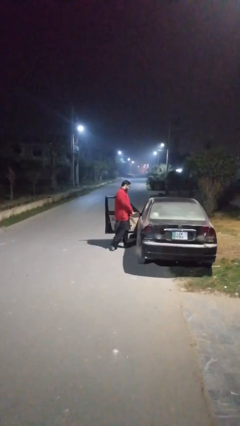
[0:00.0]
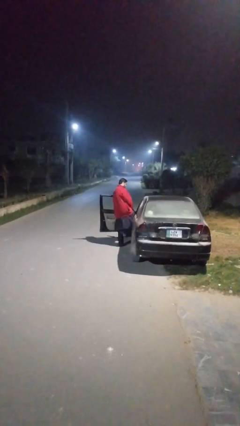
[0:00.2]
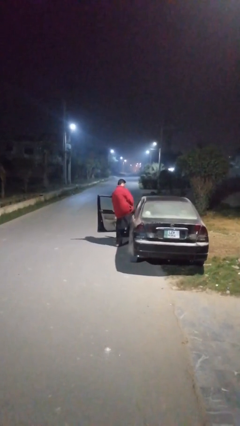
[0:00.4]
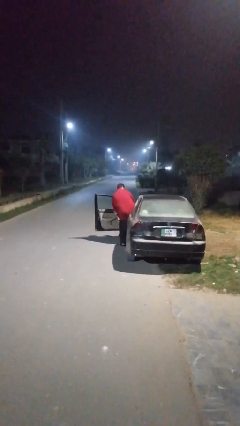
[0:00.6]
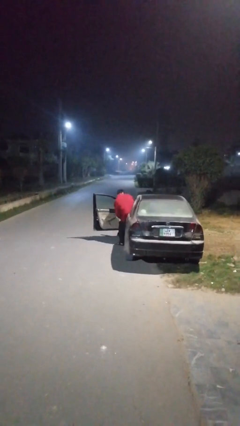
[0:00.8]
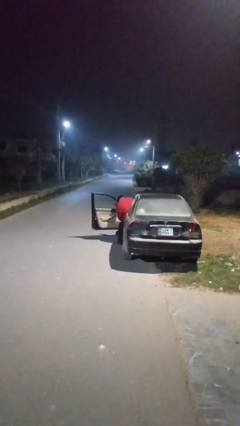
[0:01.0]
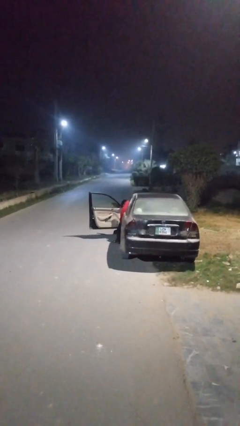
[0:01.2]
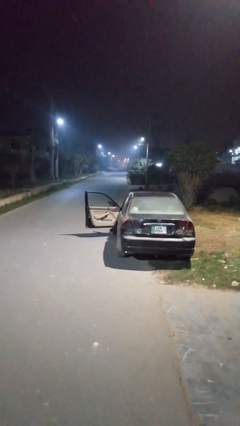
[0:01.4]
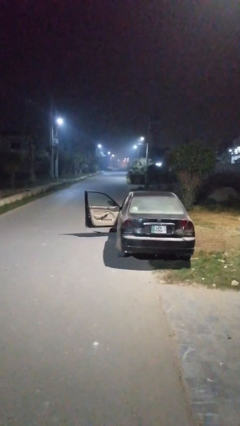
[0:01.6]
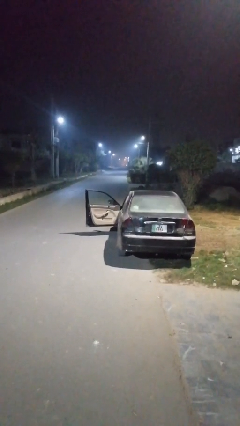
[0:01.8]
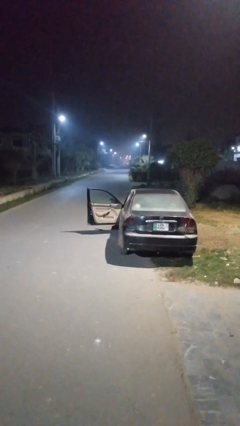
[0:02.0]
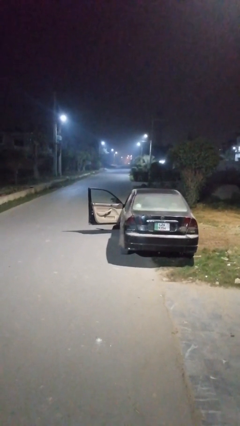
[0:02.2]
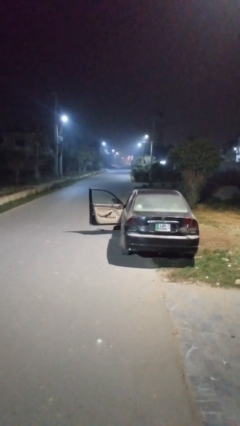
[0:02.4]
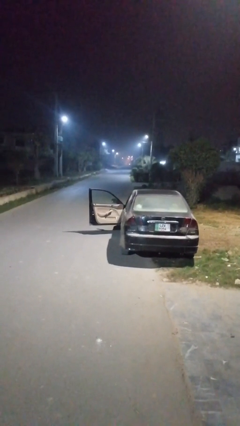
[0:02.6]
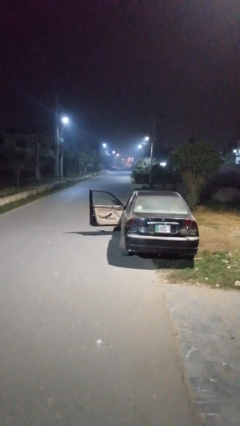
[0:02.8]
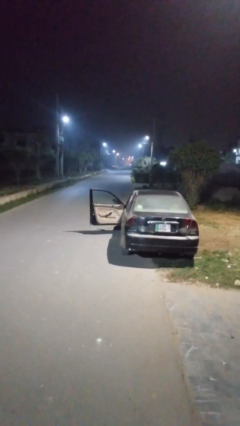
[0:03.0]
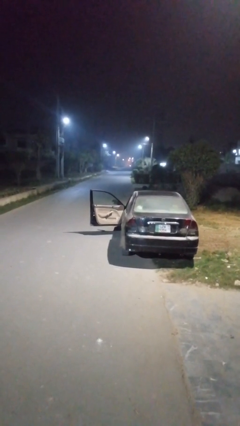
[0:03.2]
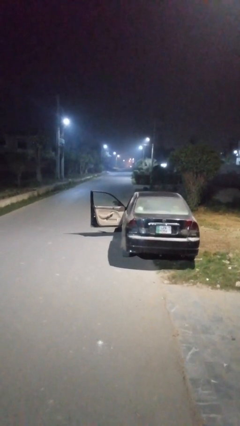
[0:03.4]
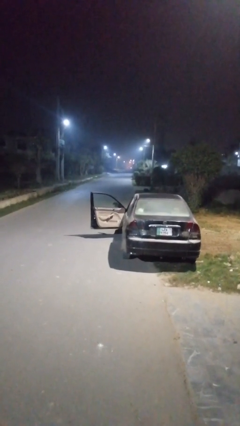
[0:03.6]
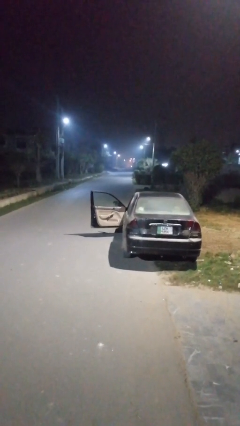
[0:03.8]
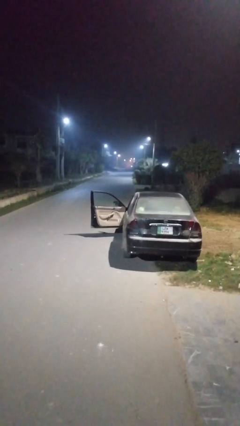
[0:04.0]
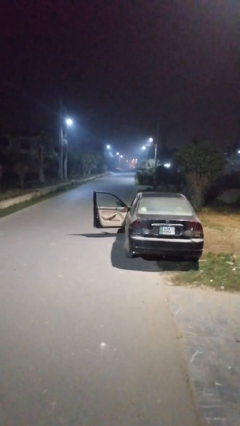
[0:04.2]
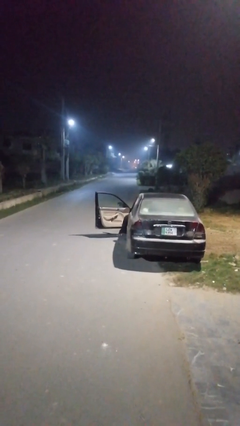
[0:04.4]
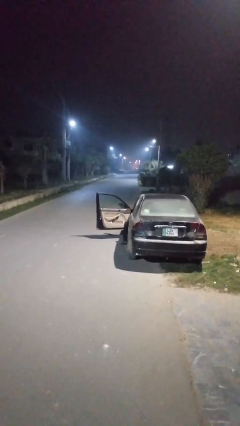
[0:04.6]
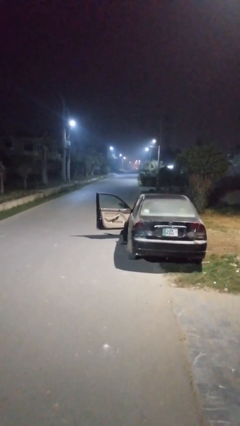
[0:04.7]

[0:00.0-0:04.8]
person enters car

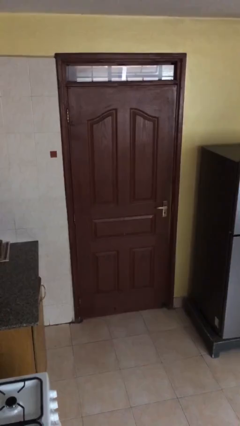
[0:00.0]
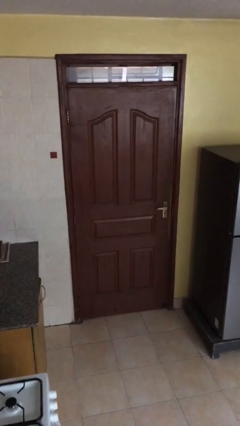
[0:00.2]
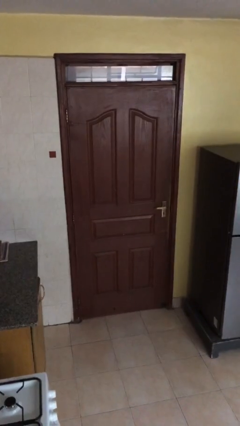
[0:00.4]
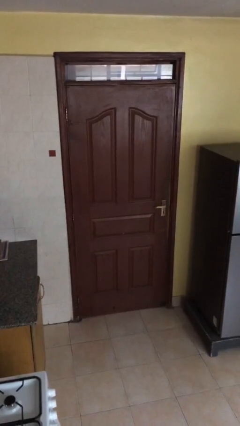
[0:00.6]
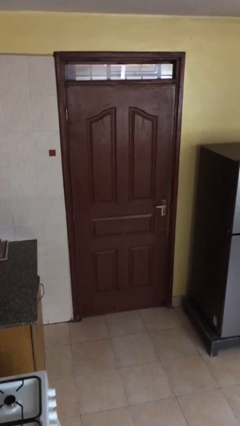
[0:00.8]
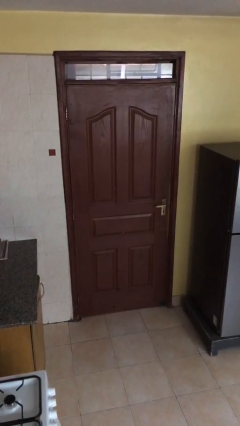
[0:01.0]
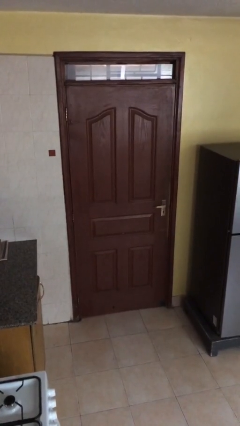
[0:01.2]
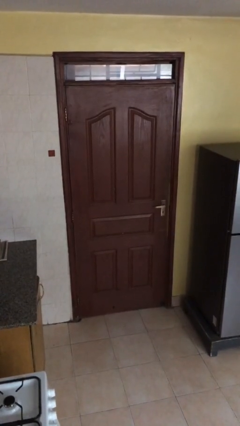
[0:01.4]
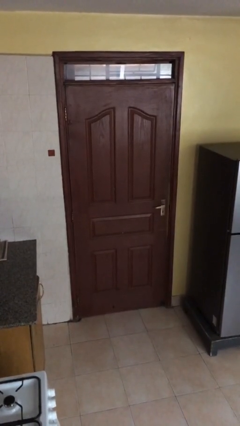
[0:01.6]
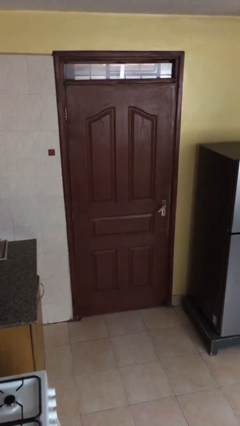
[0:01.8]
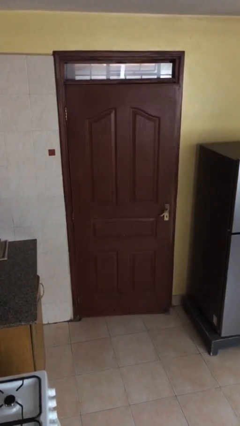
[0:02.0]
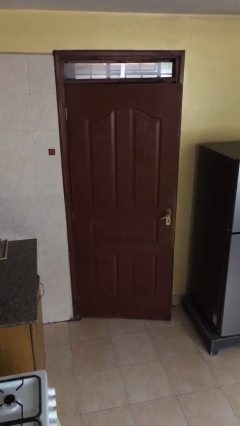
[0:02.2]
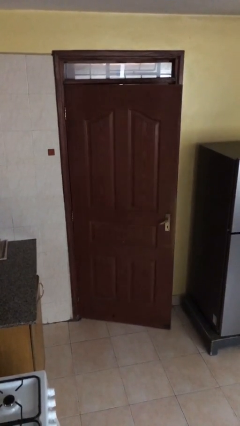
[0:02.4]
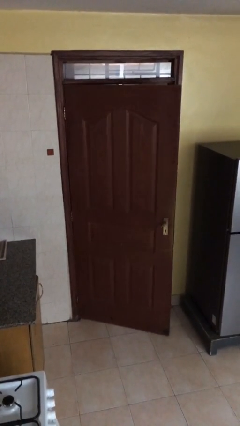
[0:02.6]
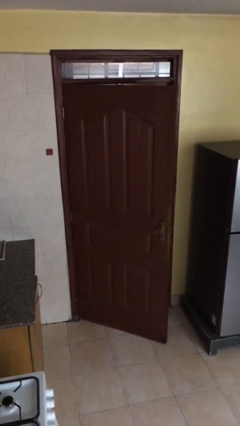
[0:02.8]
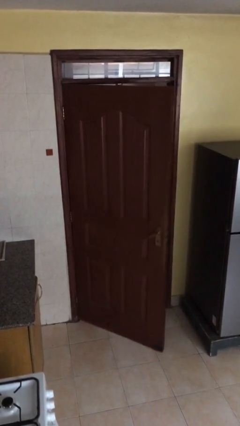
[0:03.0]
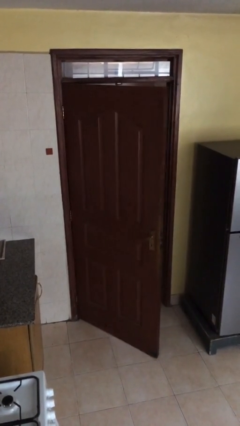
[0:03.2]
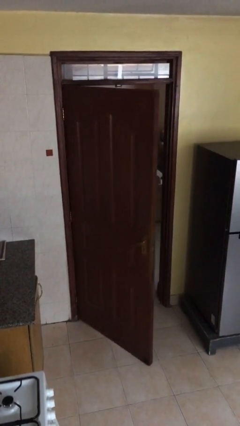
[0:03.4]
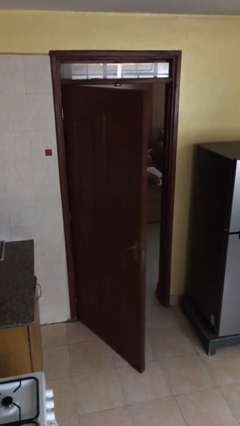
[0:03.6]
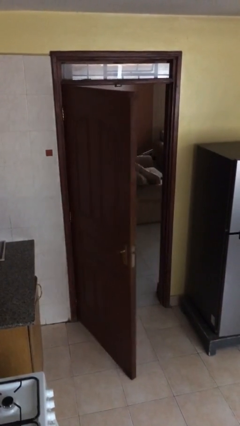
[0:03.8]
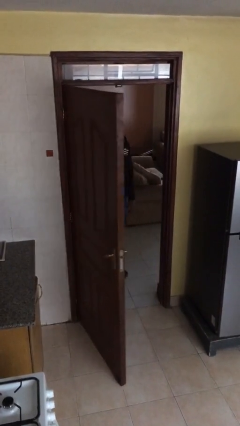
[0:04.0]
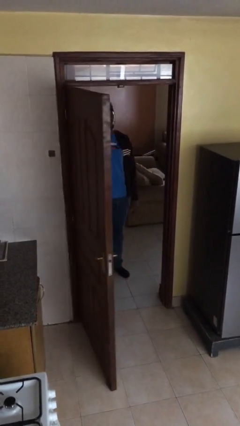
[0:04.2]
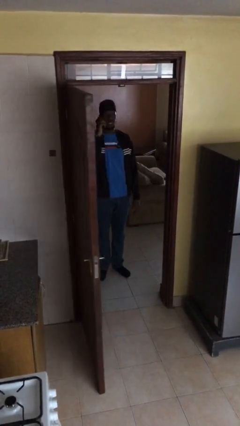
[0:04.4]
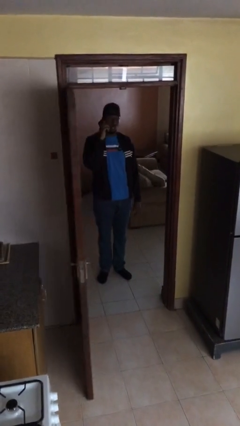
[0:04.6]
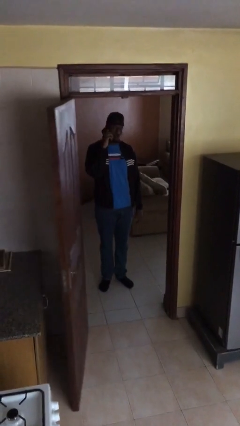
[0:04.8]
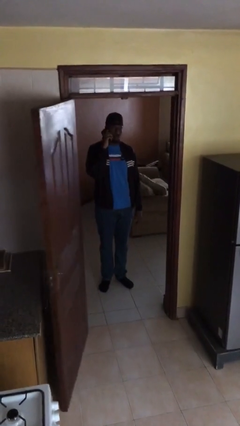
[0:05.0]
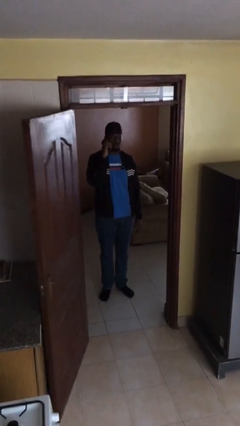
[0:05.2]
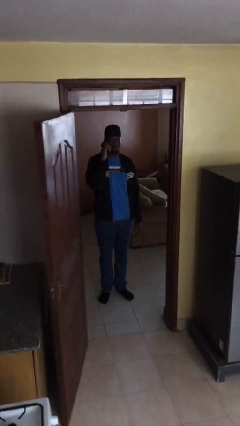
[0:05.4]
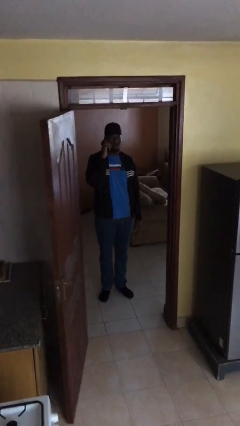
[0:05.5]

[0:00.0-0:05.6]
person opens facility door

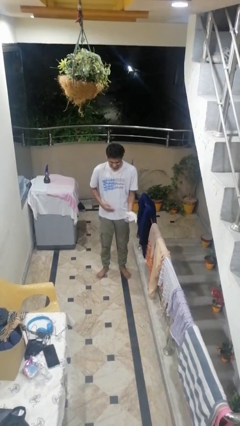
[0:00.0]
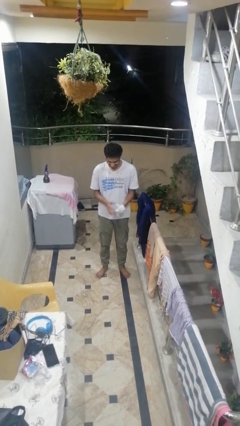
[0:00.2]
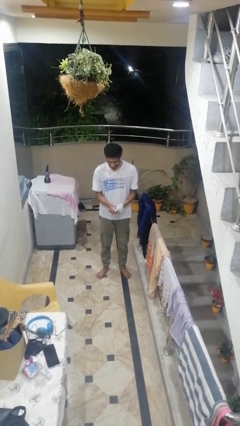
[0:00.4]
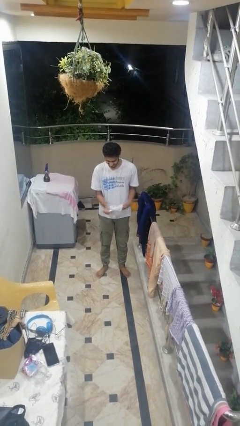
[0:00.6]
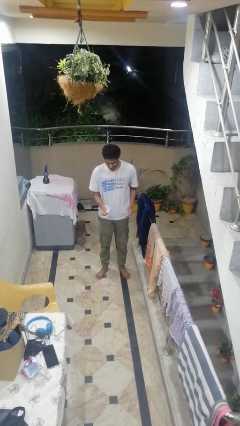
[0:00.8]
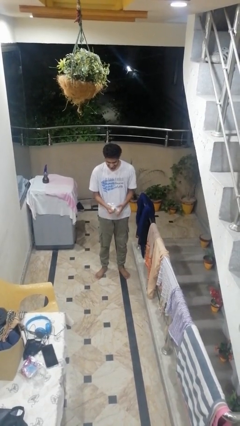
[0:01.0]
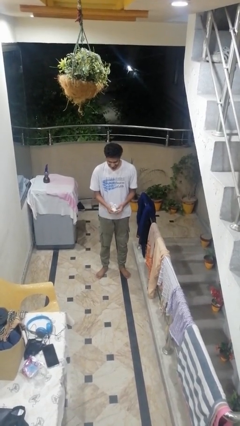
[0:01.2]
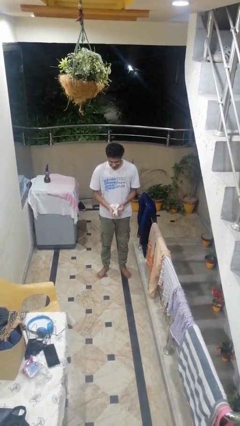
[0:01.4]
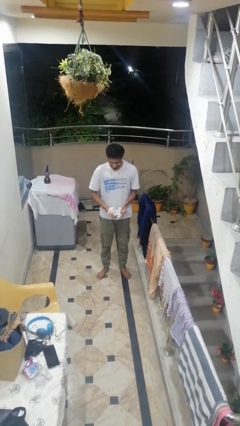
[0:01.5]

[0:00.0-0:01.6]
person takes off gloves

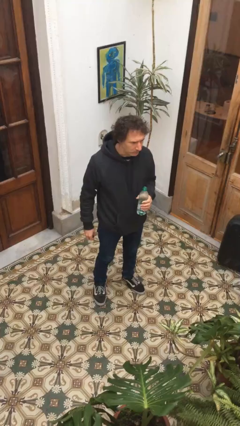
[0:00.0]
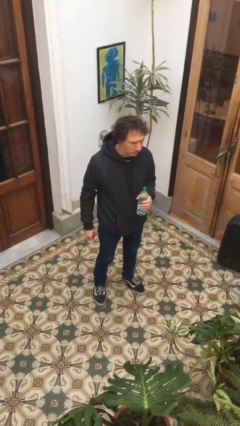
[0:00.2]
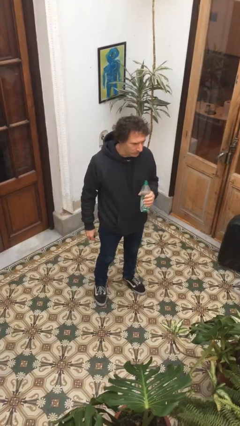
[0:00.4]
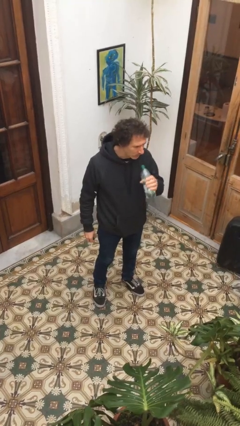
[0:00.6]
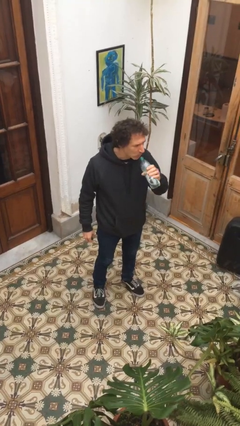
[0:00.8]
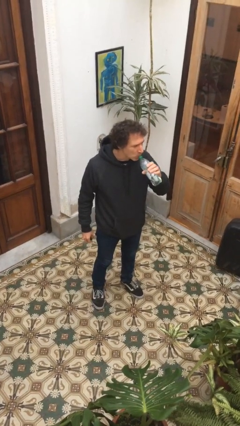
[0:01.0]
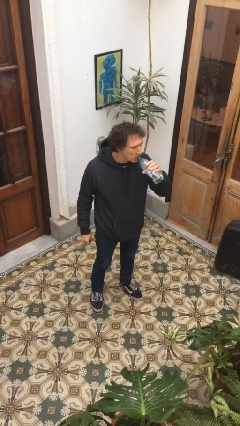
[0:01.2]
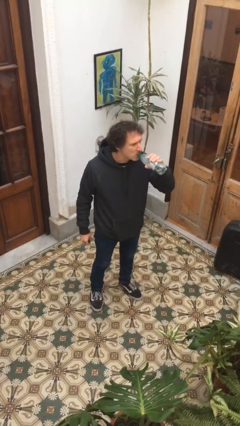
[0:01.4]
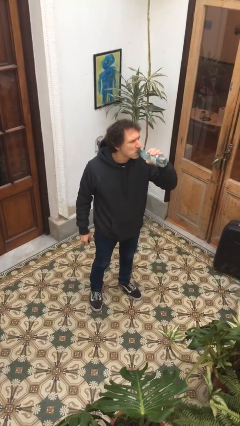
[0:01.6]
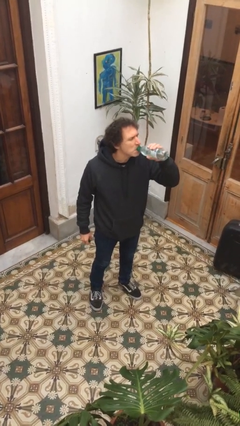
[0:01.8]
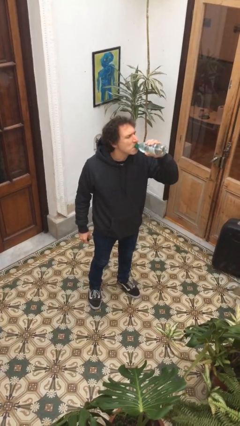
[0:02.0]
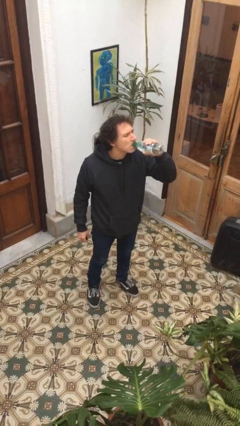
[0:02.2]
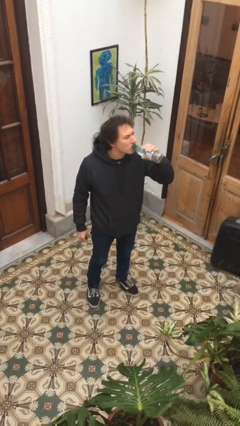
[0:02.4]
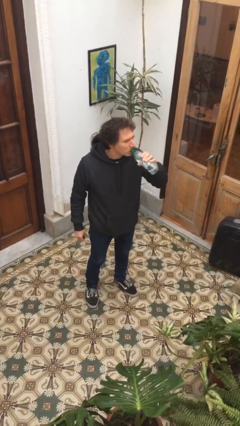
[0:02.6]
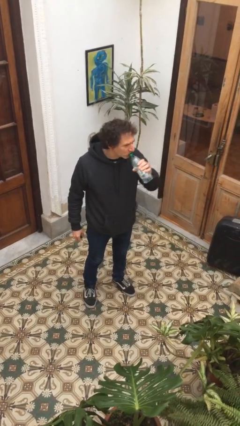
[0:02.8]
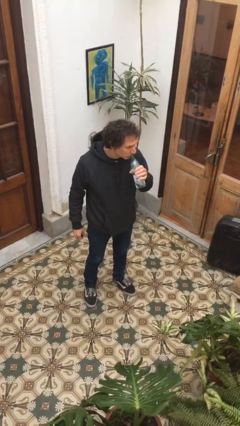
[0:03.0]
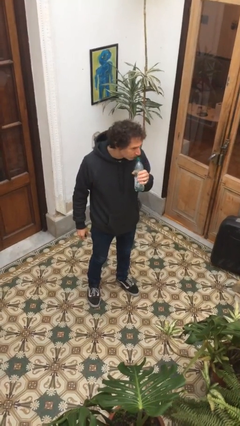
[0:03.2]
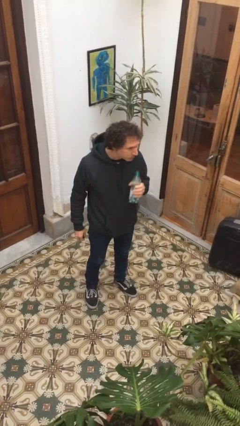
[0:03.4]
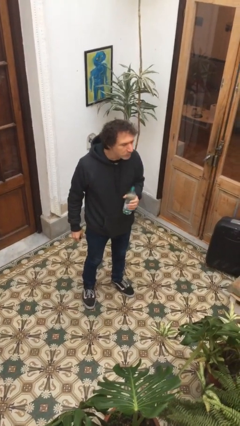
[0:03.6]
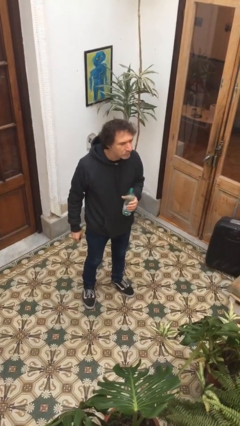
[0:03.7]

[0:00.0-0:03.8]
person drinks from bottle

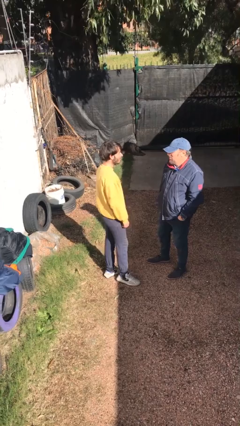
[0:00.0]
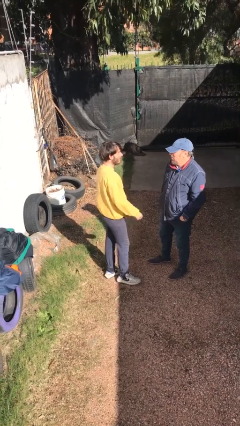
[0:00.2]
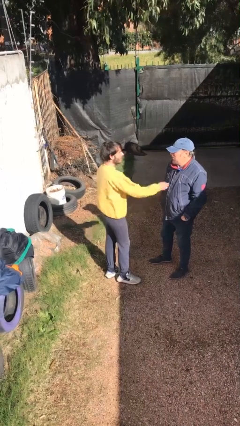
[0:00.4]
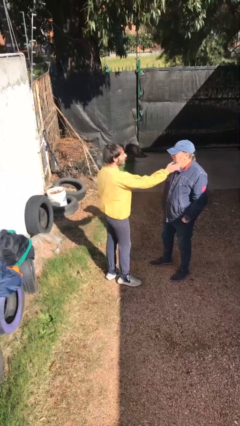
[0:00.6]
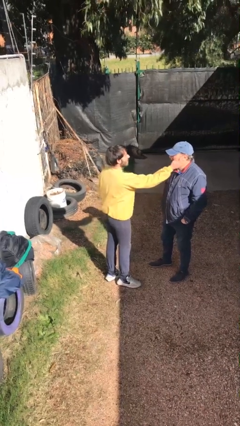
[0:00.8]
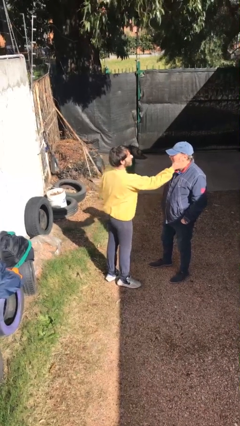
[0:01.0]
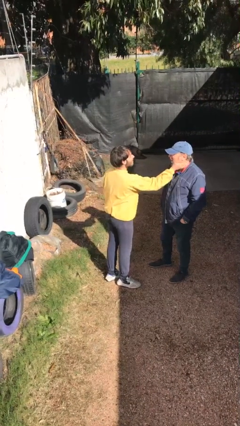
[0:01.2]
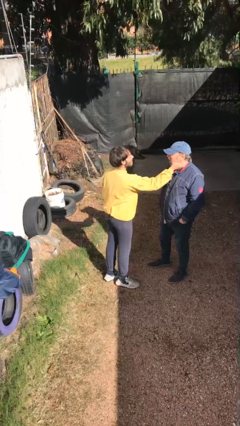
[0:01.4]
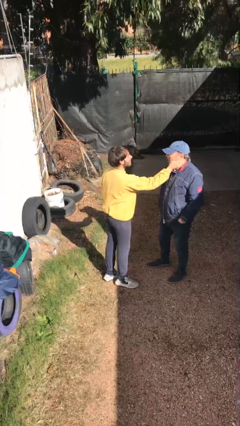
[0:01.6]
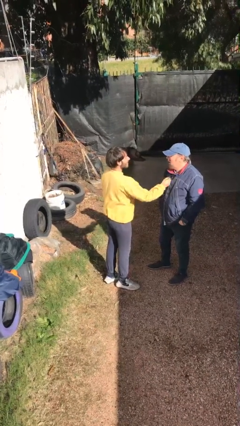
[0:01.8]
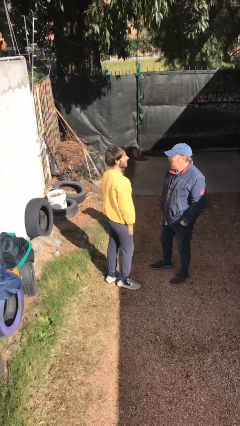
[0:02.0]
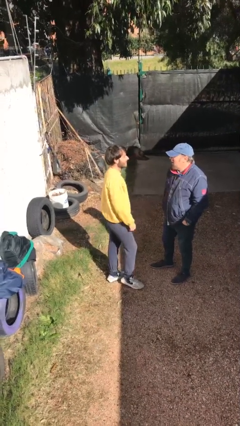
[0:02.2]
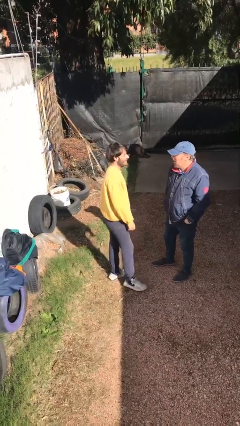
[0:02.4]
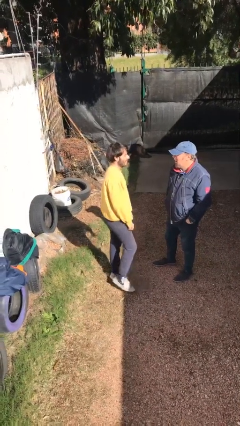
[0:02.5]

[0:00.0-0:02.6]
person touches face of person
